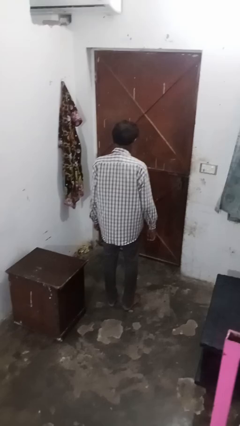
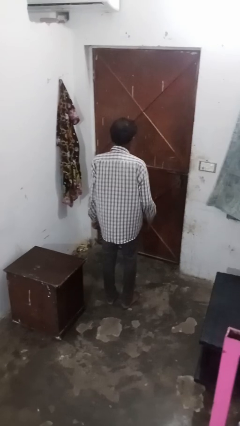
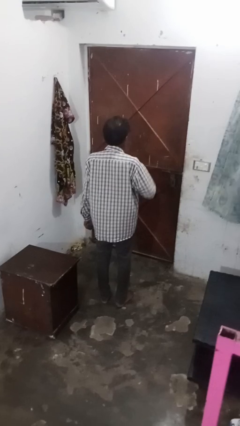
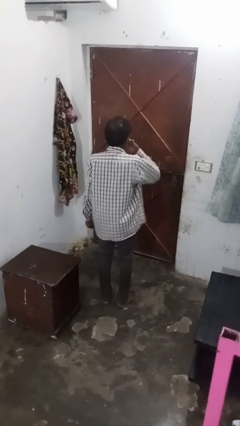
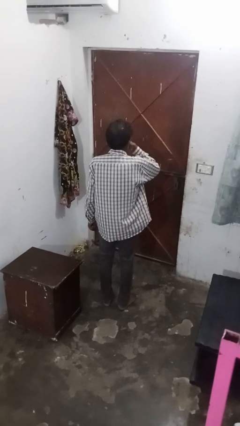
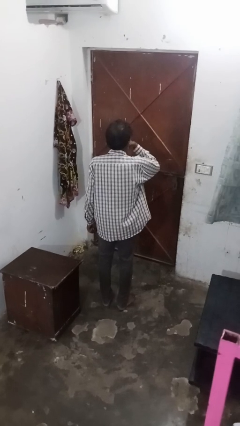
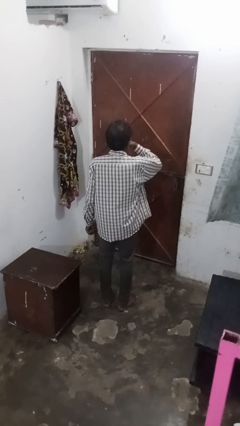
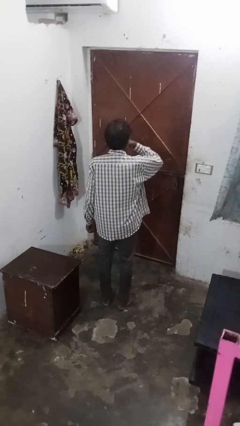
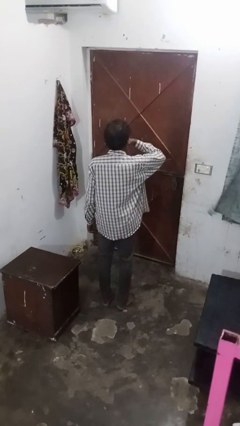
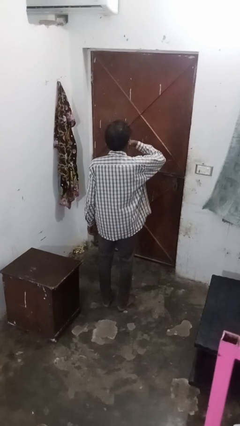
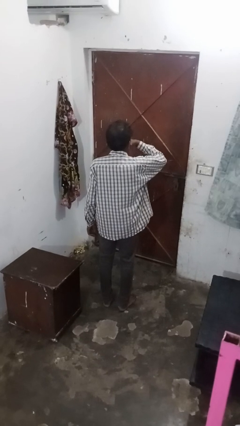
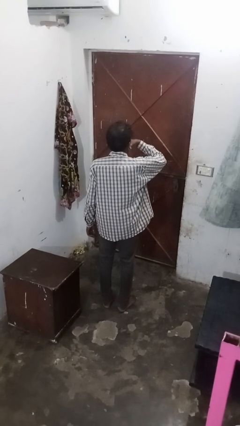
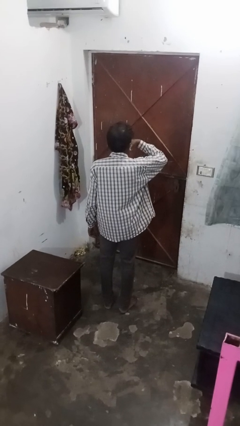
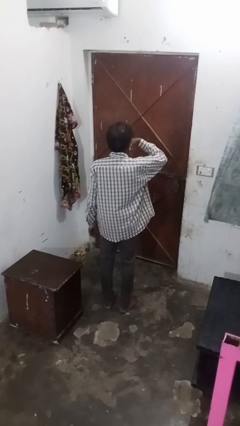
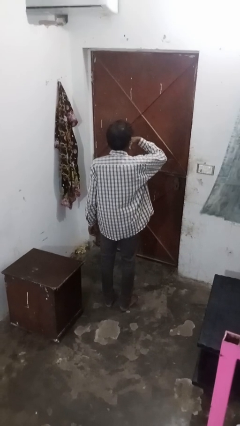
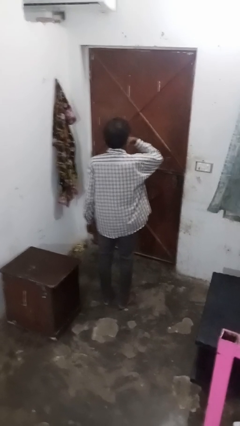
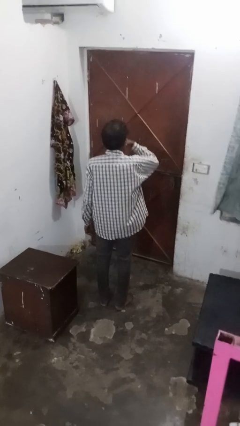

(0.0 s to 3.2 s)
person strokes chin

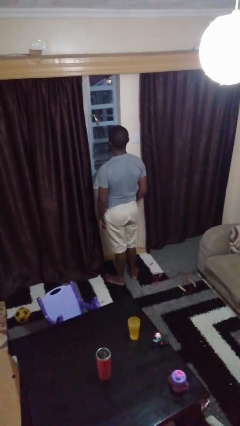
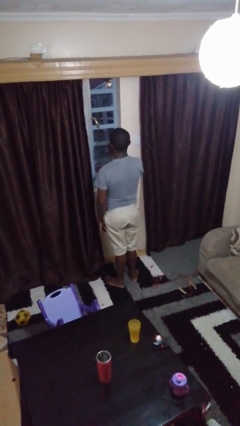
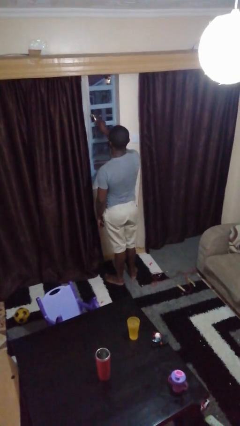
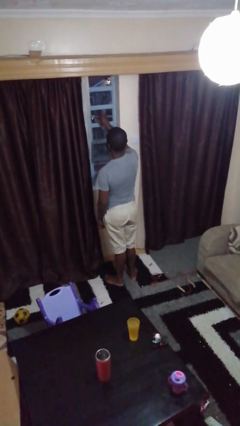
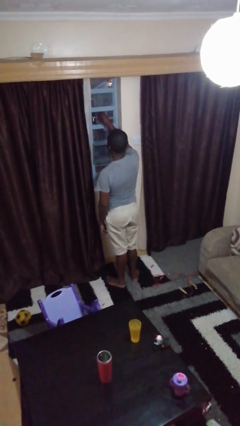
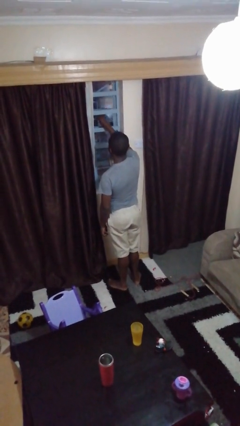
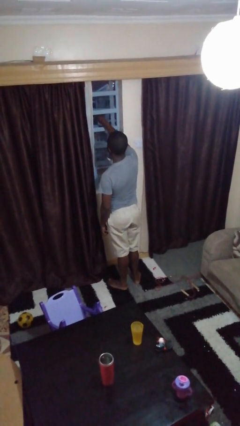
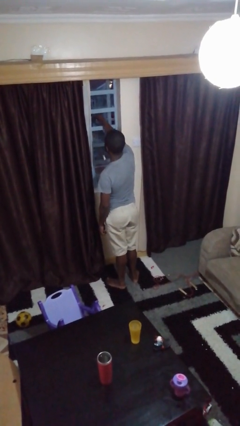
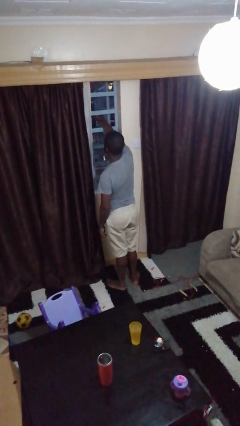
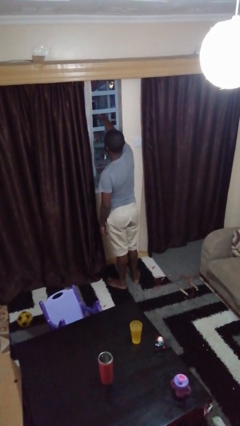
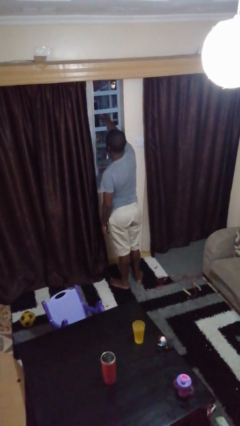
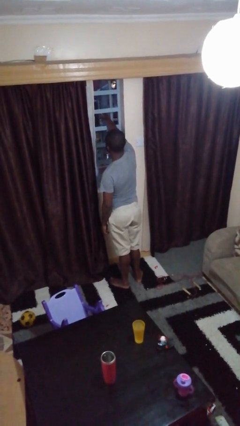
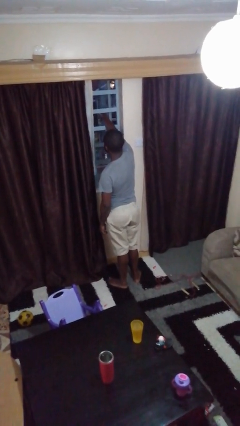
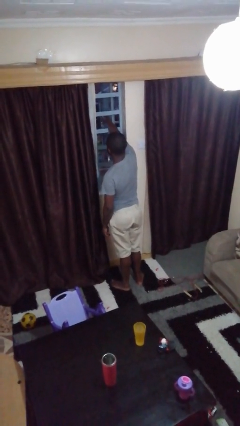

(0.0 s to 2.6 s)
person opens home window

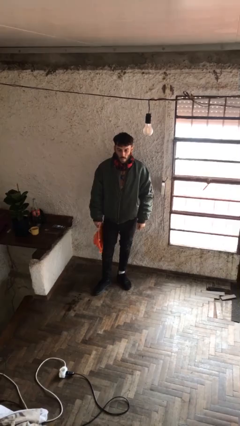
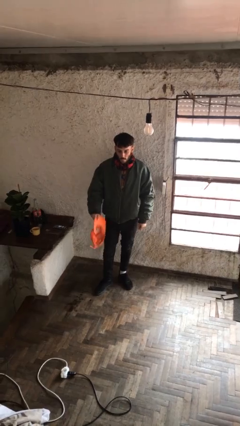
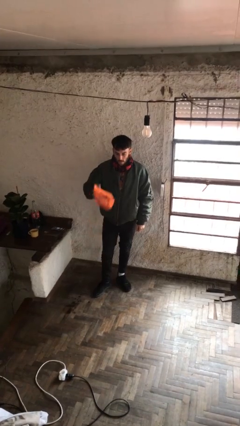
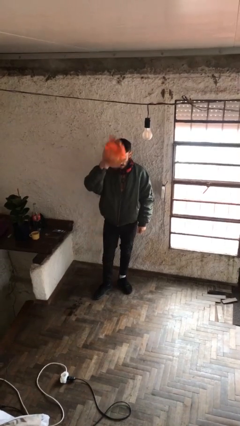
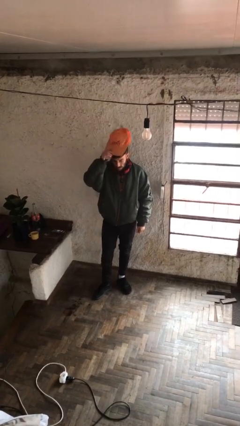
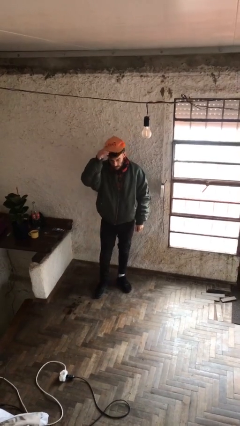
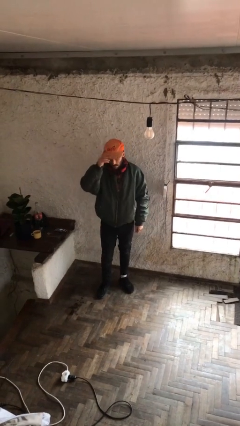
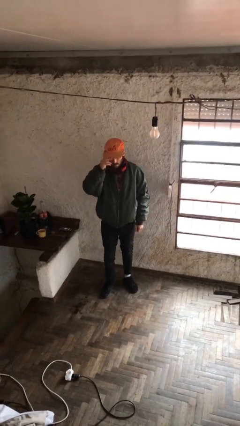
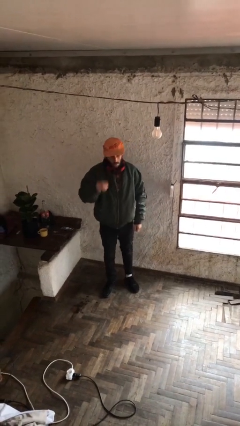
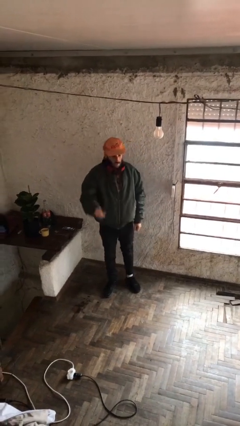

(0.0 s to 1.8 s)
person puts on hat

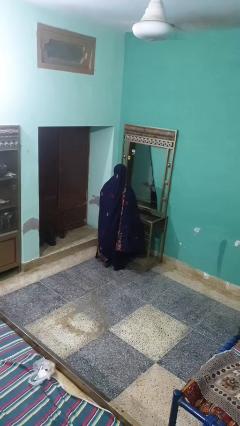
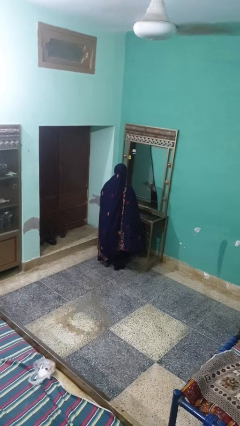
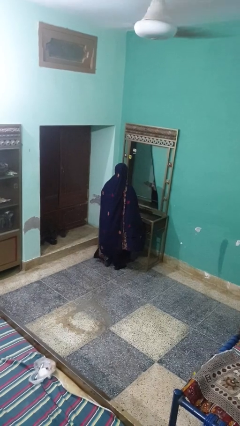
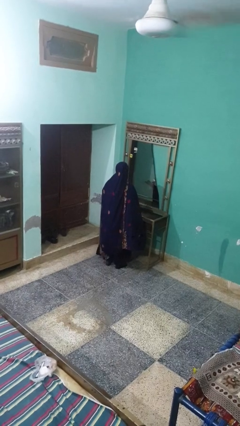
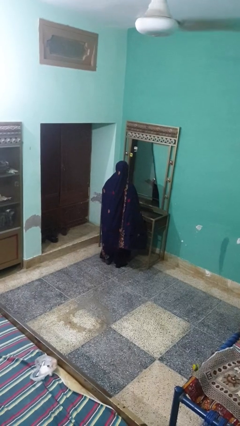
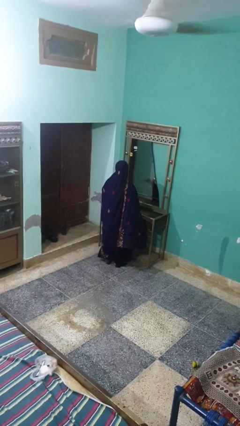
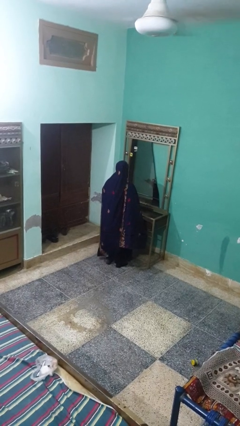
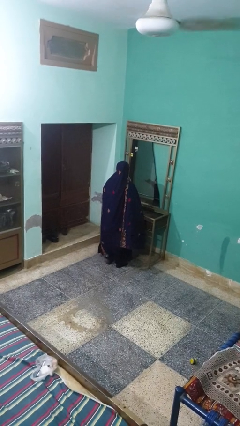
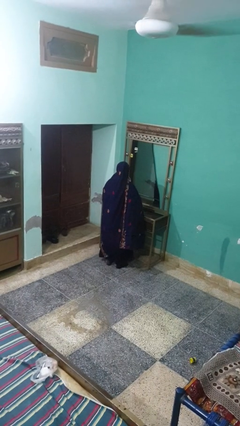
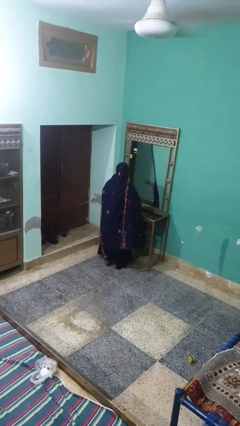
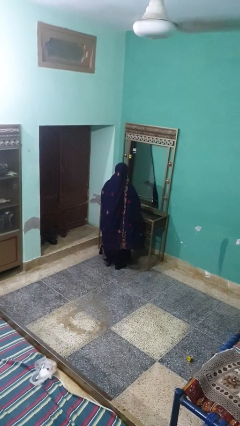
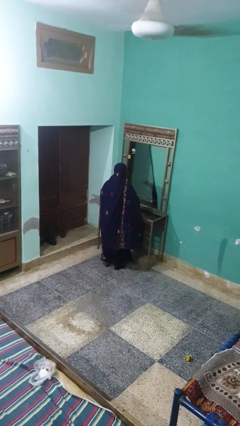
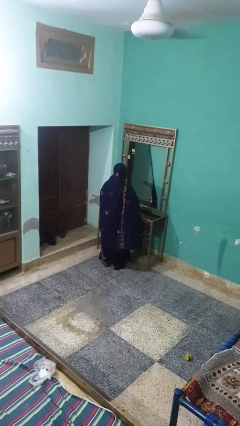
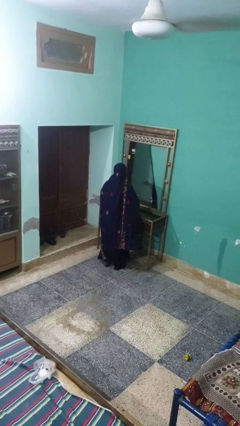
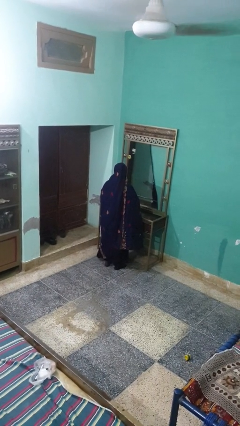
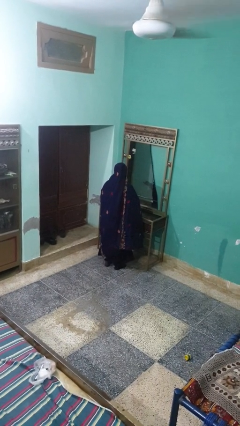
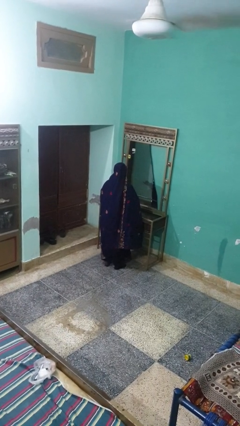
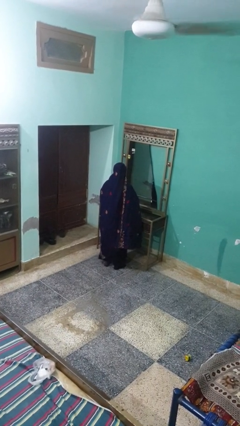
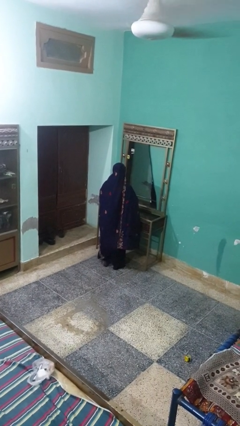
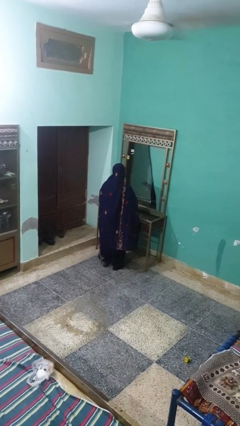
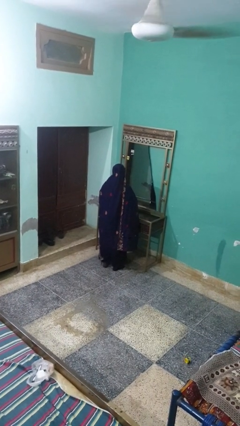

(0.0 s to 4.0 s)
person applies lip makeup

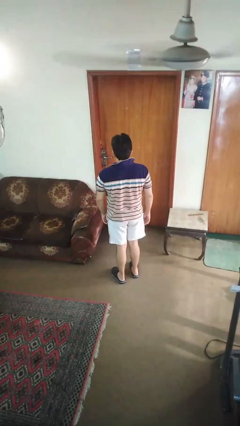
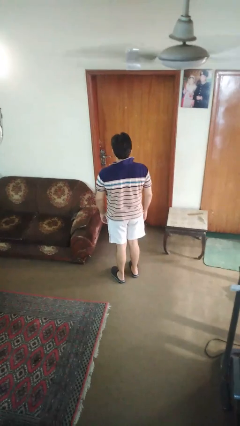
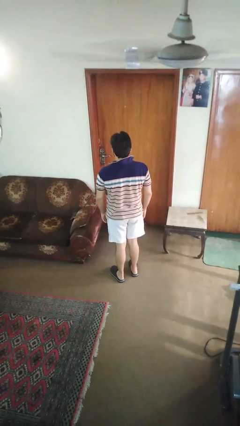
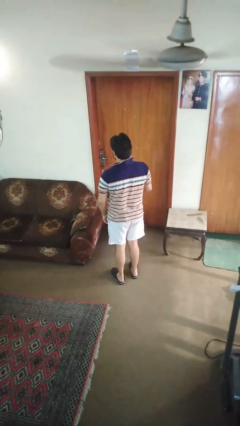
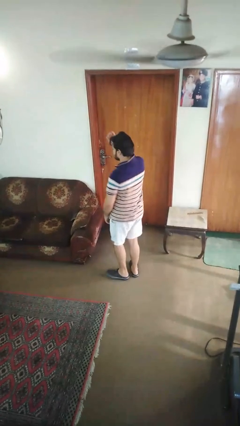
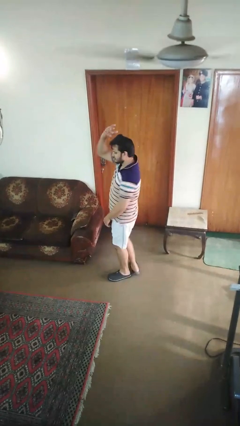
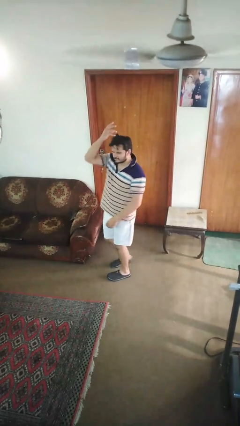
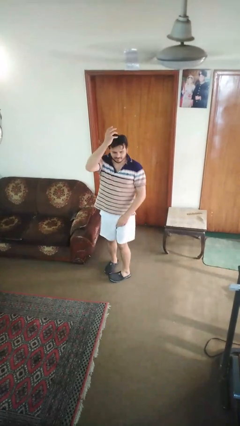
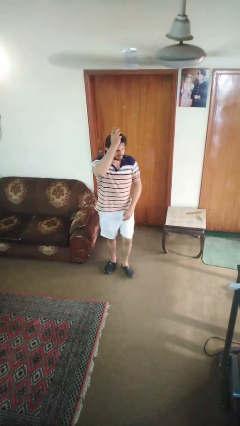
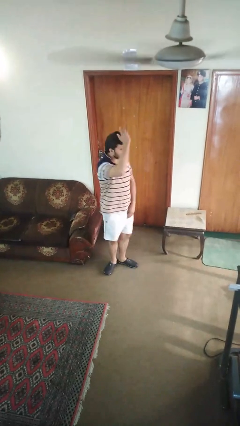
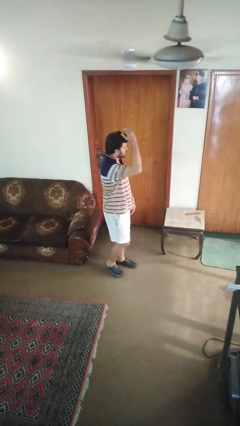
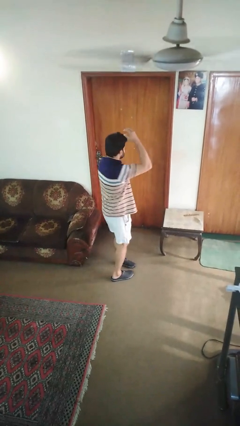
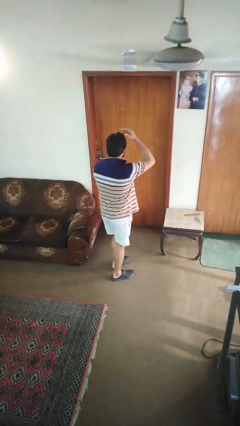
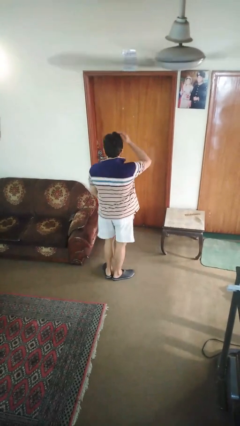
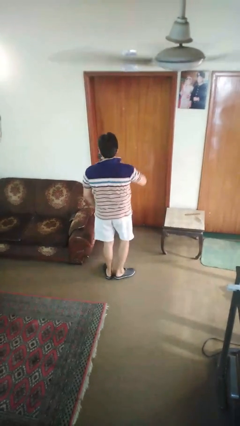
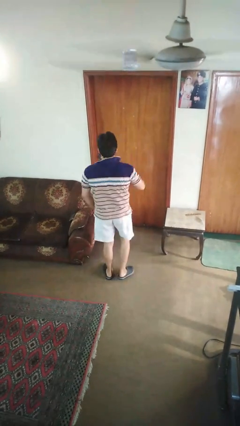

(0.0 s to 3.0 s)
person twirls

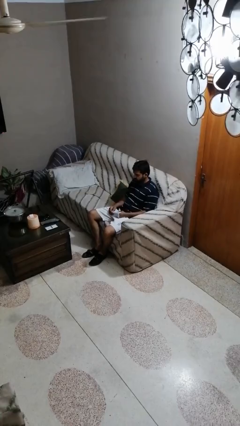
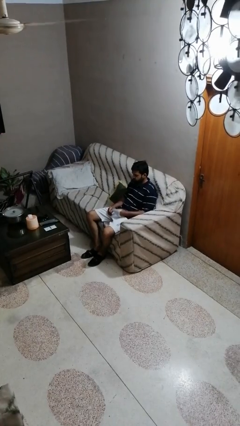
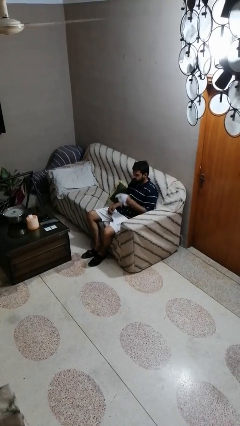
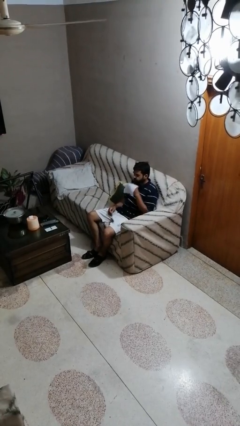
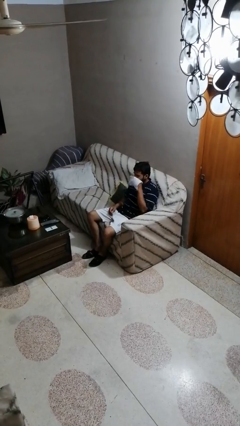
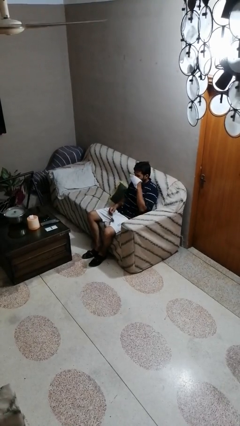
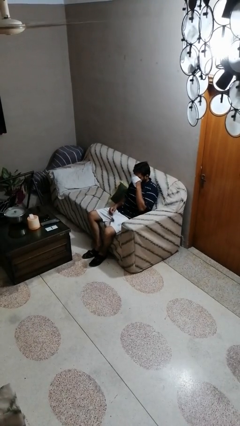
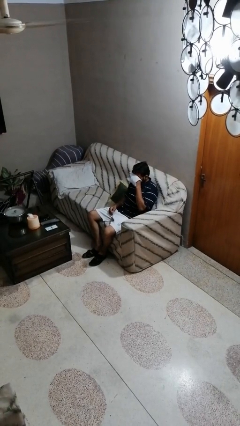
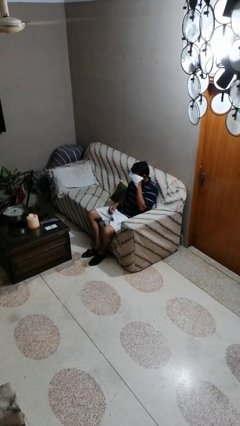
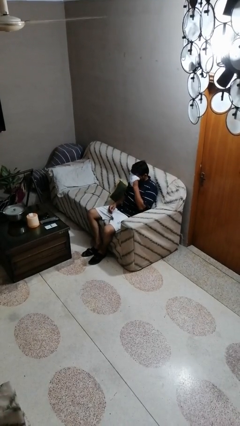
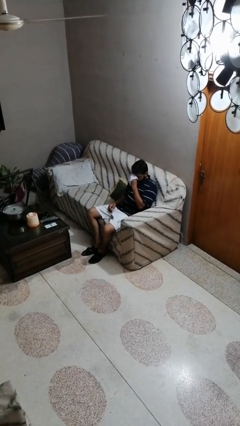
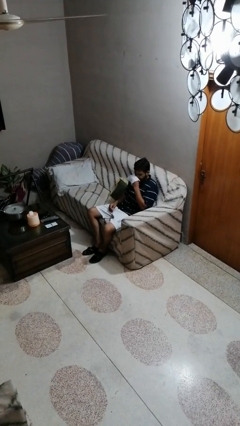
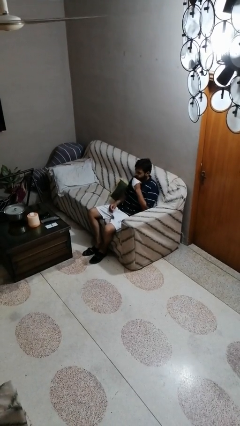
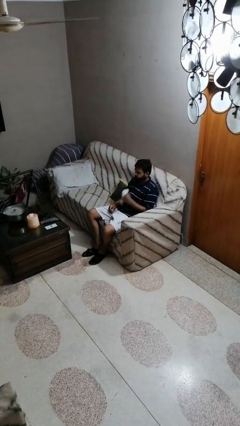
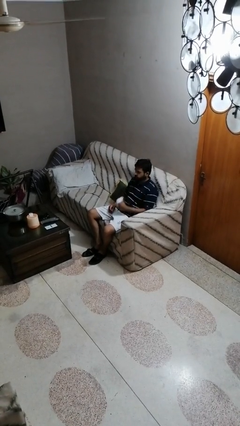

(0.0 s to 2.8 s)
person wipes mouth with napkin

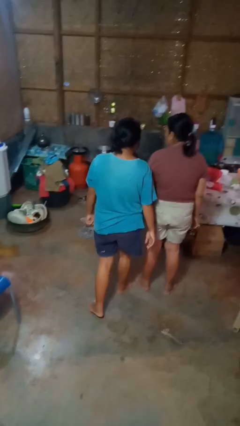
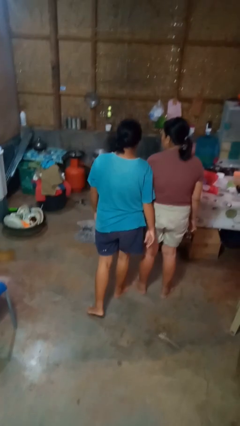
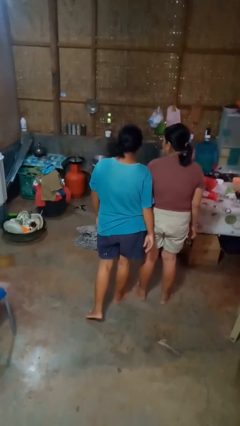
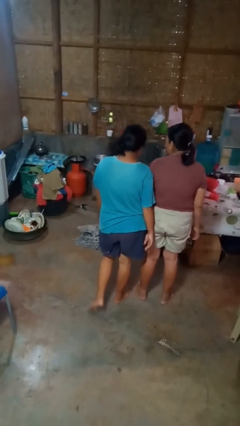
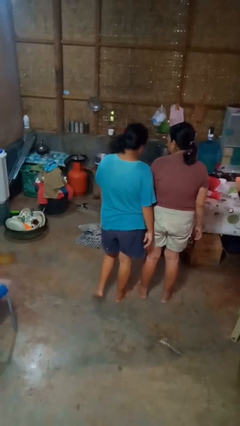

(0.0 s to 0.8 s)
person bumps into person
